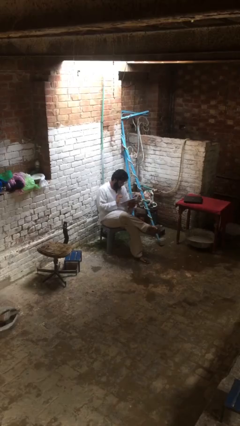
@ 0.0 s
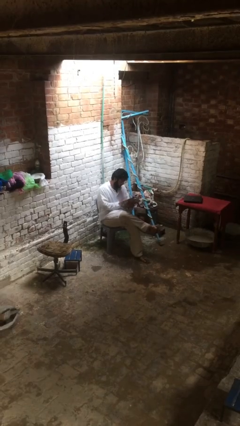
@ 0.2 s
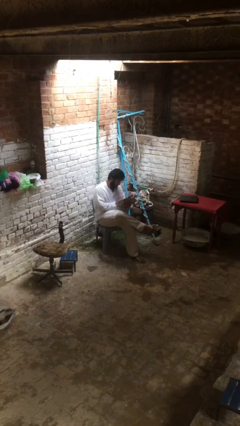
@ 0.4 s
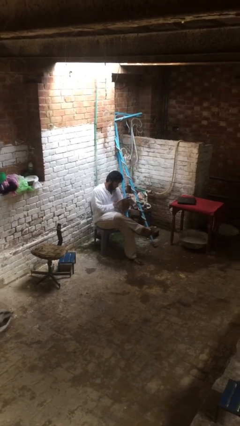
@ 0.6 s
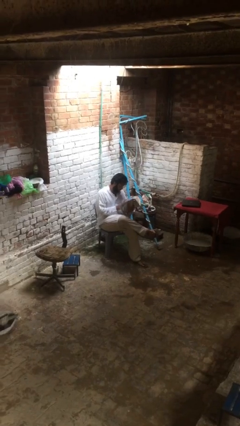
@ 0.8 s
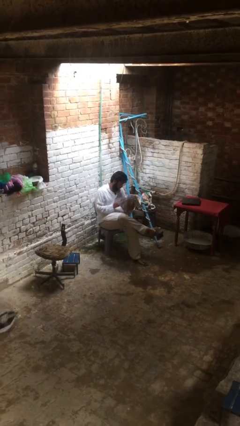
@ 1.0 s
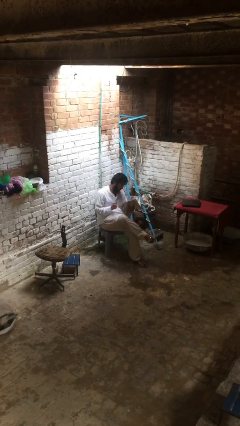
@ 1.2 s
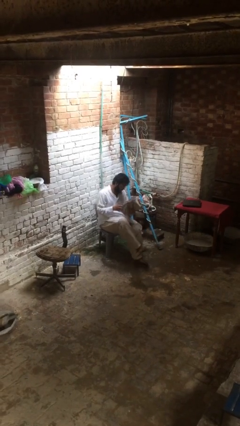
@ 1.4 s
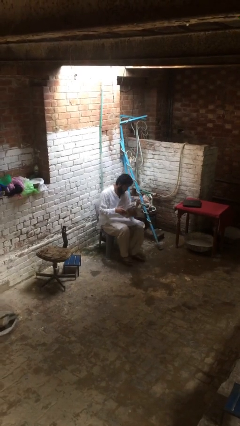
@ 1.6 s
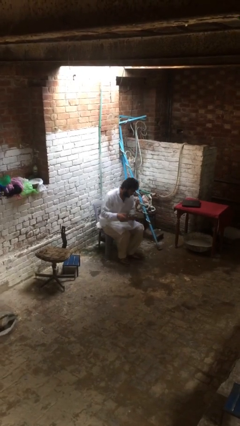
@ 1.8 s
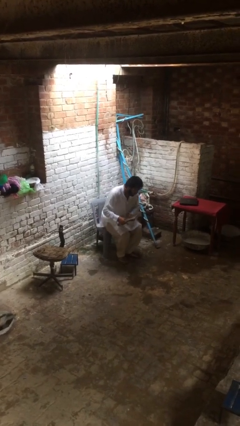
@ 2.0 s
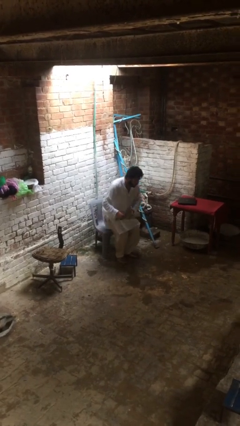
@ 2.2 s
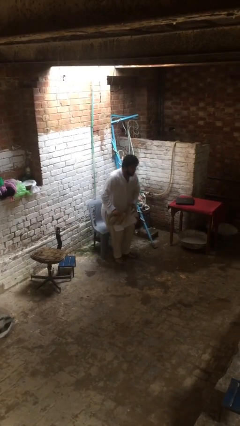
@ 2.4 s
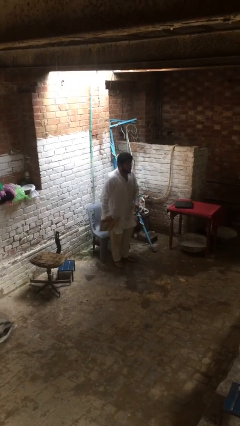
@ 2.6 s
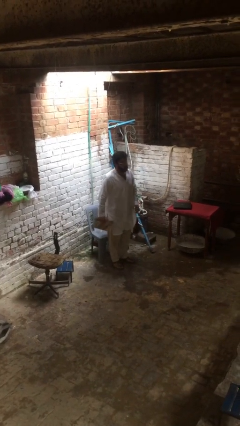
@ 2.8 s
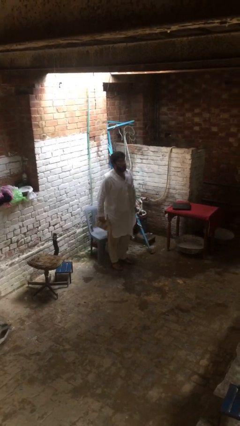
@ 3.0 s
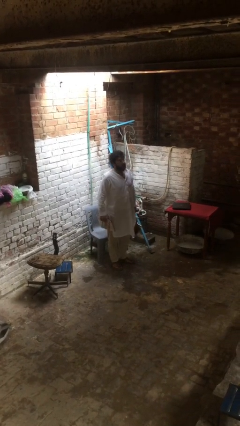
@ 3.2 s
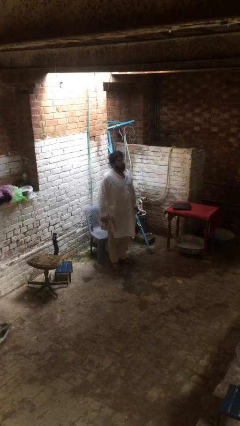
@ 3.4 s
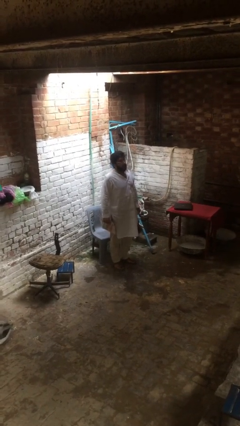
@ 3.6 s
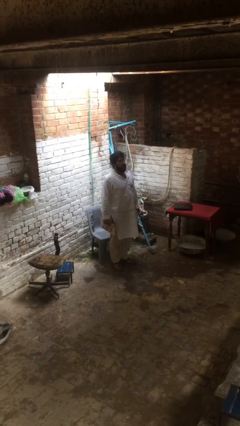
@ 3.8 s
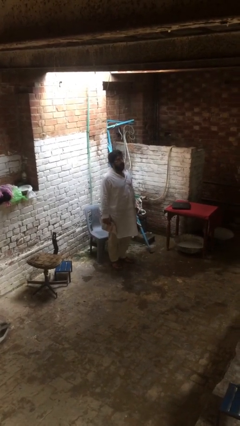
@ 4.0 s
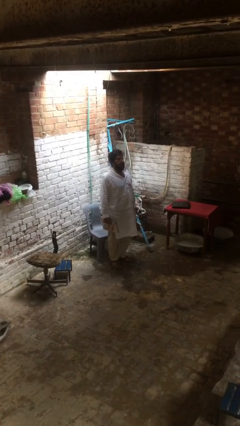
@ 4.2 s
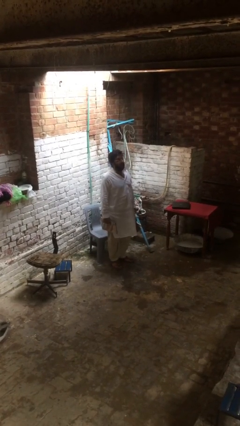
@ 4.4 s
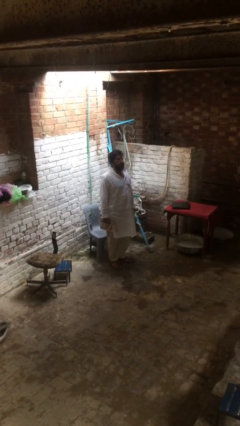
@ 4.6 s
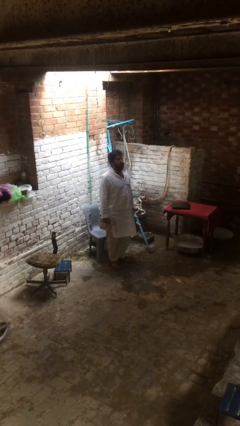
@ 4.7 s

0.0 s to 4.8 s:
person stands up

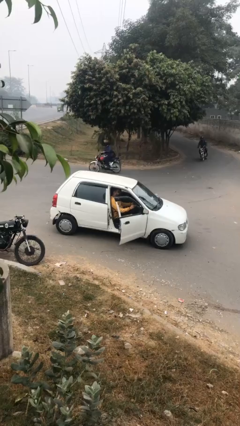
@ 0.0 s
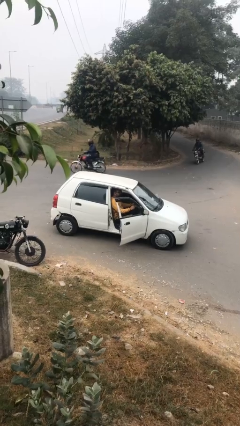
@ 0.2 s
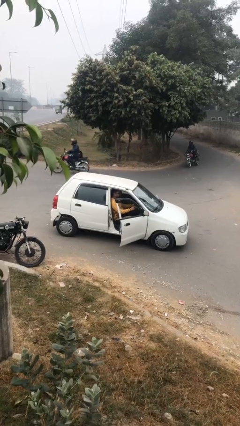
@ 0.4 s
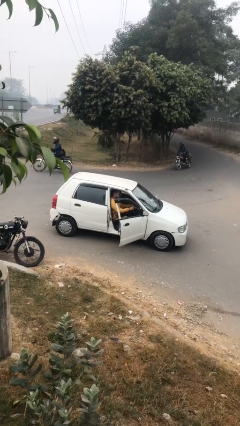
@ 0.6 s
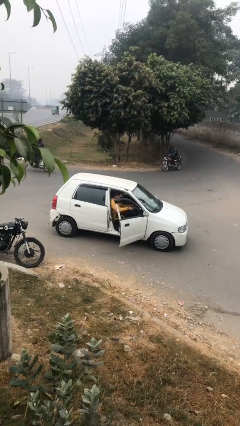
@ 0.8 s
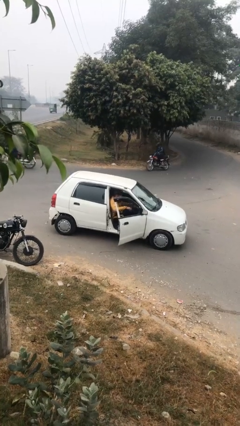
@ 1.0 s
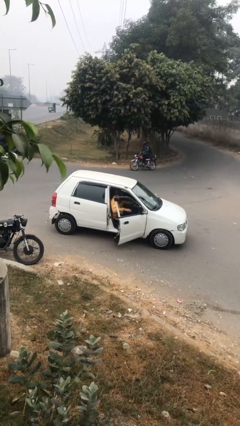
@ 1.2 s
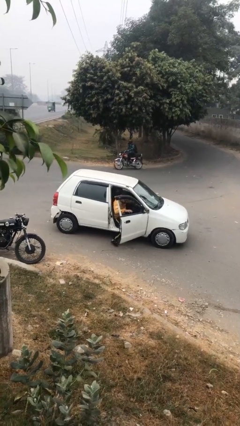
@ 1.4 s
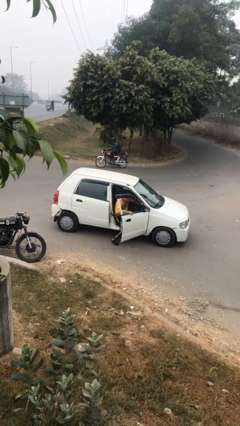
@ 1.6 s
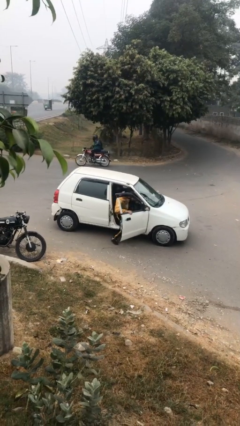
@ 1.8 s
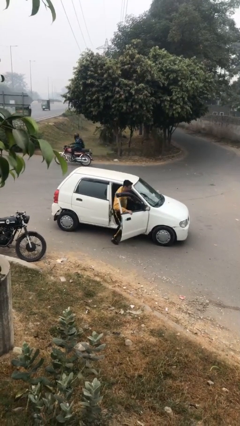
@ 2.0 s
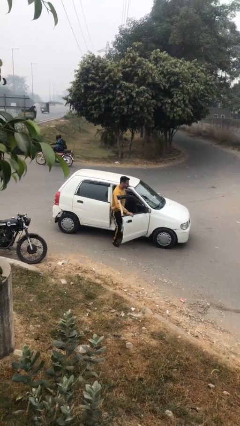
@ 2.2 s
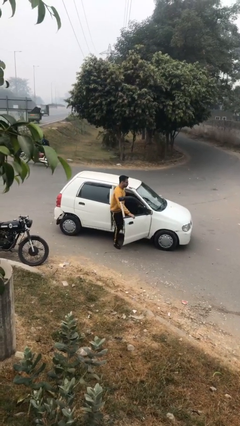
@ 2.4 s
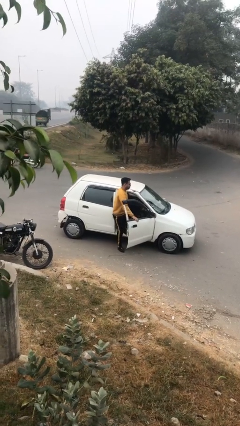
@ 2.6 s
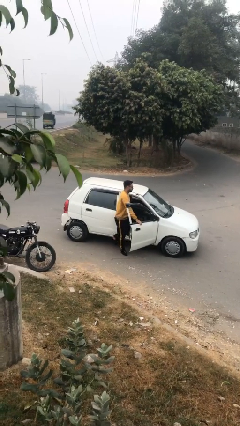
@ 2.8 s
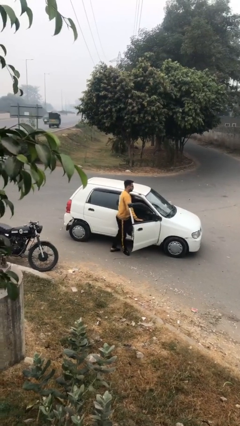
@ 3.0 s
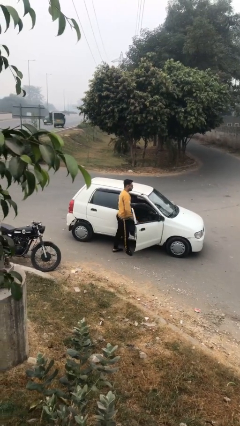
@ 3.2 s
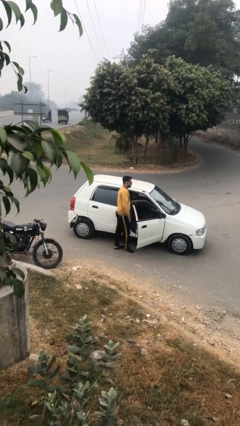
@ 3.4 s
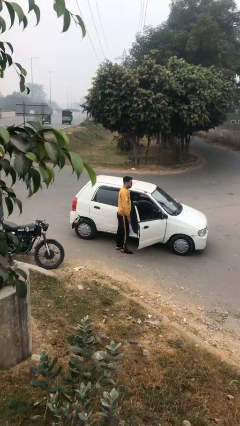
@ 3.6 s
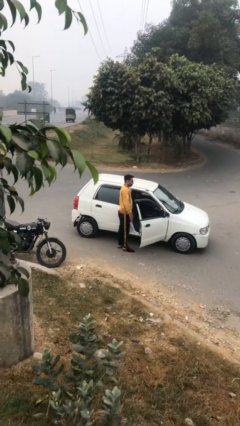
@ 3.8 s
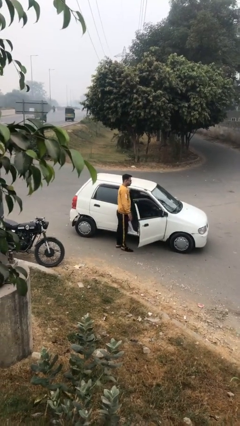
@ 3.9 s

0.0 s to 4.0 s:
person exits car

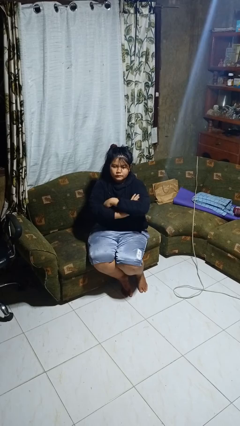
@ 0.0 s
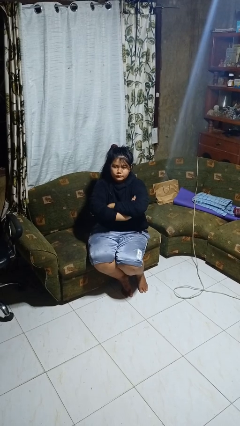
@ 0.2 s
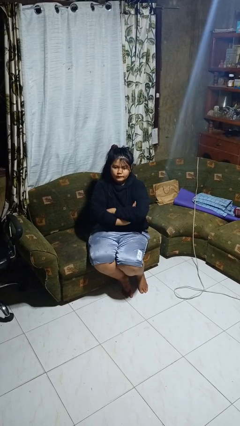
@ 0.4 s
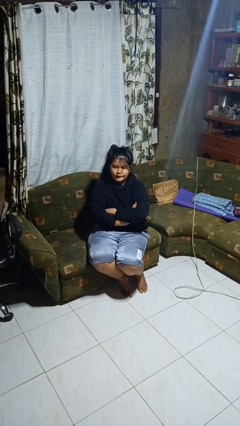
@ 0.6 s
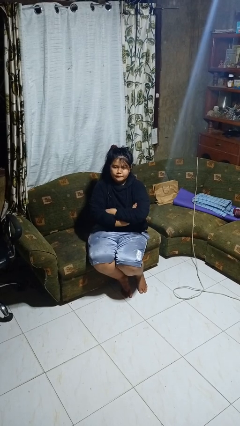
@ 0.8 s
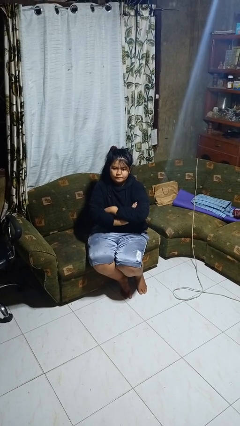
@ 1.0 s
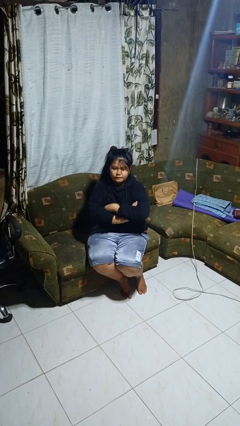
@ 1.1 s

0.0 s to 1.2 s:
person crosses arms

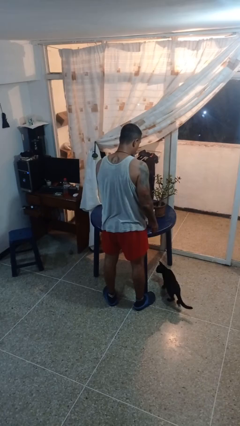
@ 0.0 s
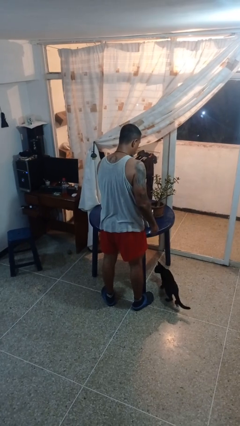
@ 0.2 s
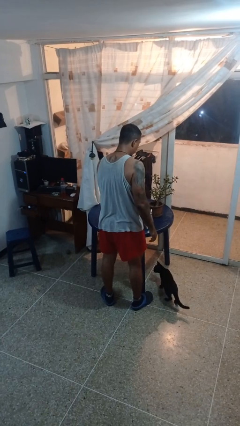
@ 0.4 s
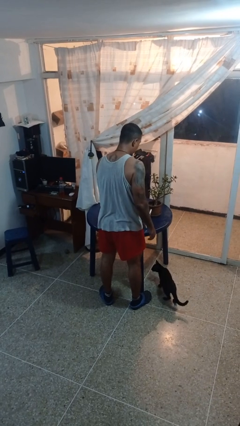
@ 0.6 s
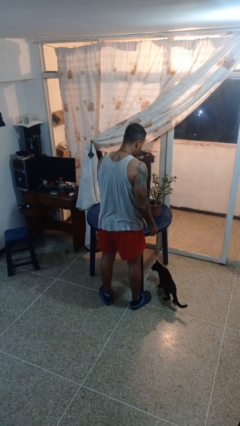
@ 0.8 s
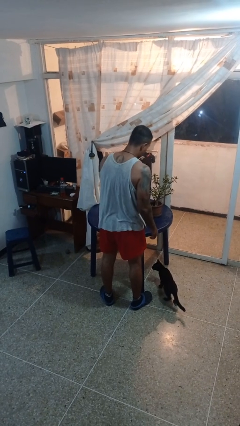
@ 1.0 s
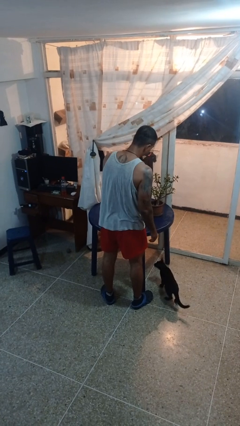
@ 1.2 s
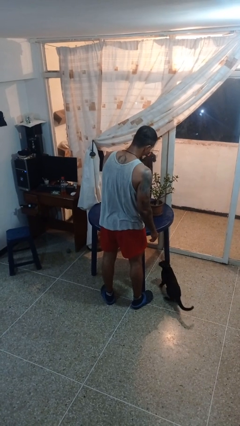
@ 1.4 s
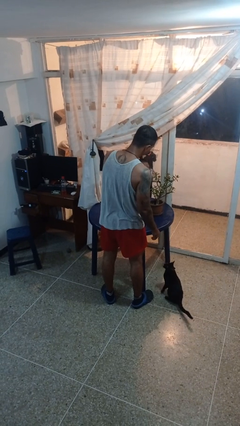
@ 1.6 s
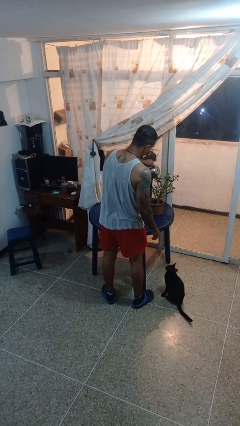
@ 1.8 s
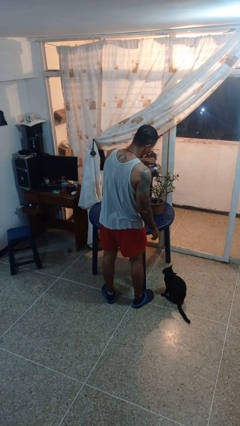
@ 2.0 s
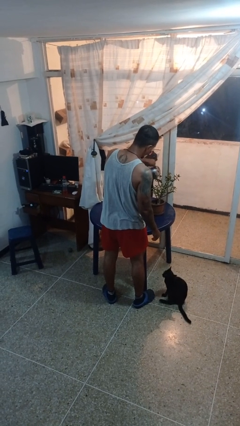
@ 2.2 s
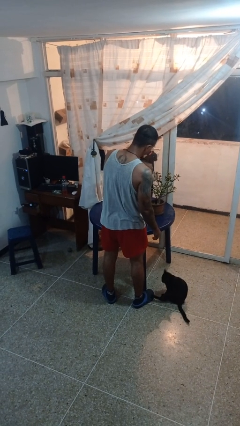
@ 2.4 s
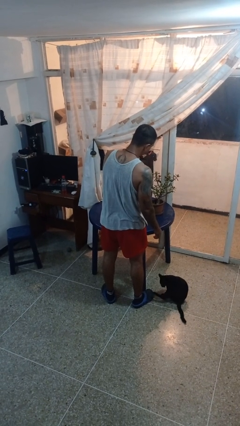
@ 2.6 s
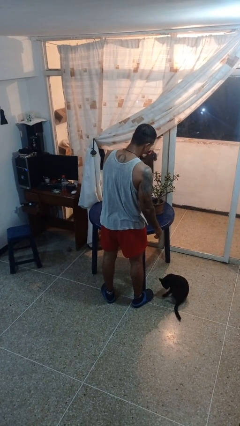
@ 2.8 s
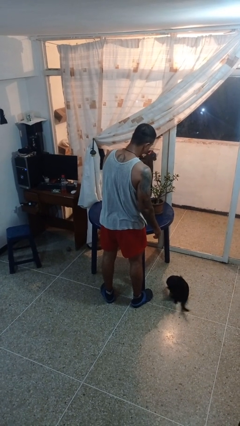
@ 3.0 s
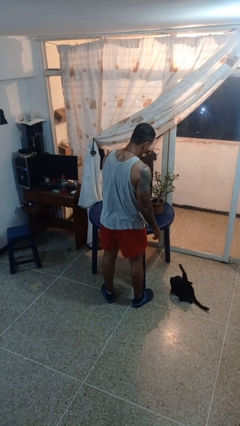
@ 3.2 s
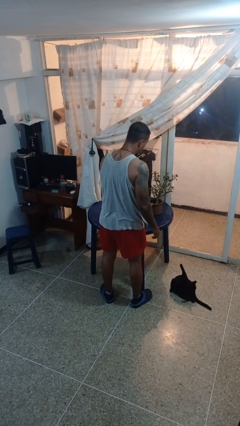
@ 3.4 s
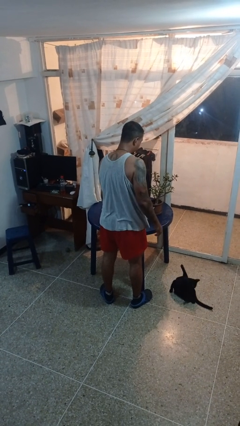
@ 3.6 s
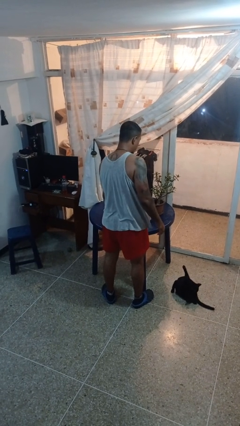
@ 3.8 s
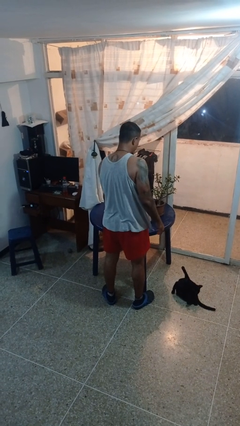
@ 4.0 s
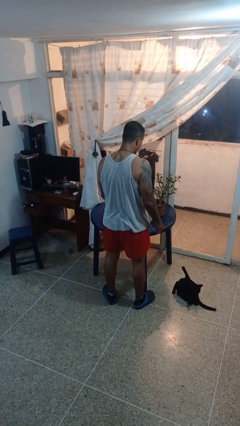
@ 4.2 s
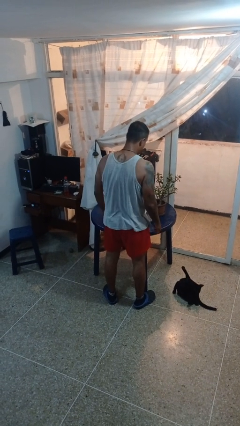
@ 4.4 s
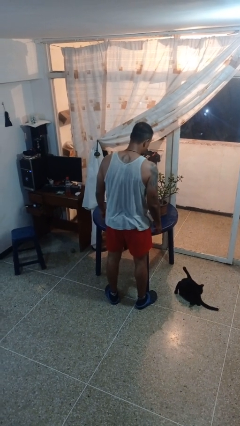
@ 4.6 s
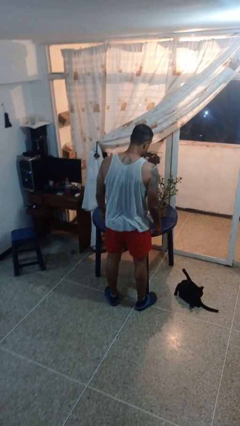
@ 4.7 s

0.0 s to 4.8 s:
person waters houseplant

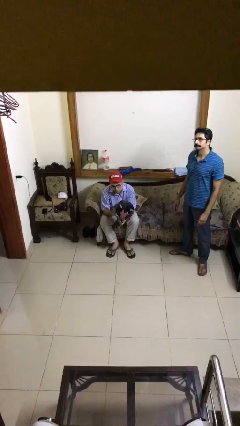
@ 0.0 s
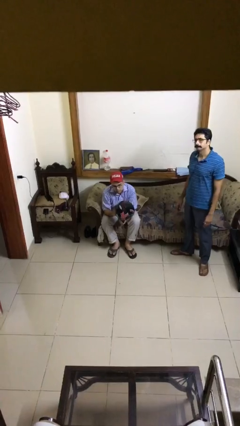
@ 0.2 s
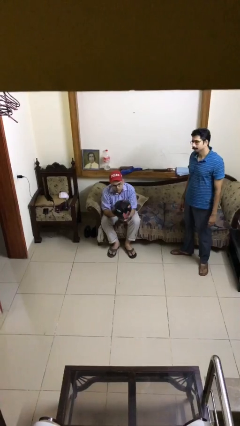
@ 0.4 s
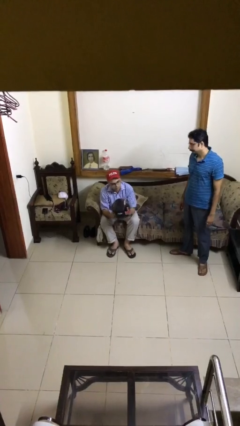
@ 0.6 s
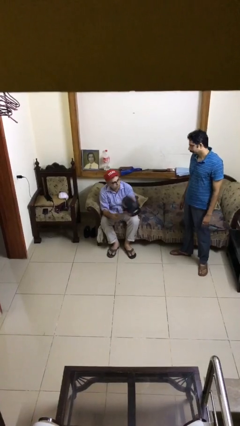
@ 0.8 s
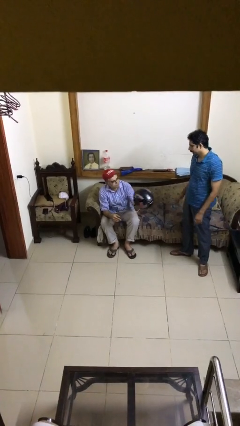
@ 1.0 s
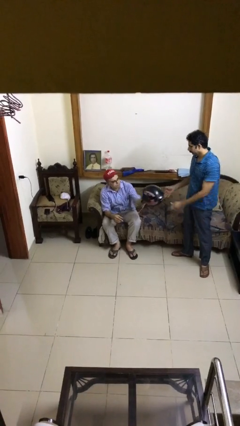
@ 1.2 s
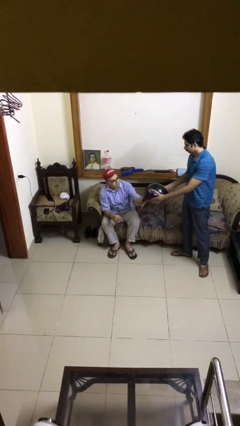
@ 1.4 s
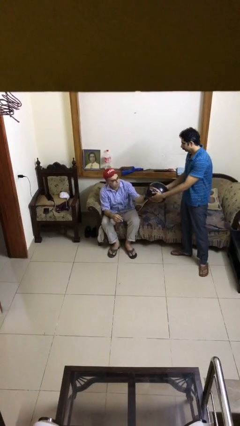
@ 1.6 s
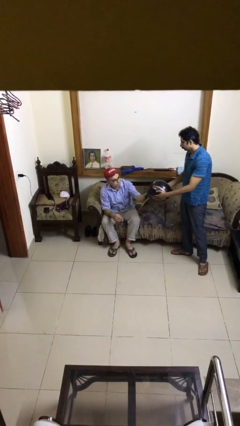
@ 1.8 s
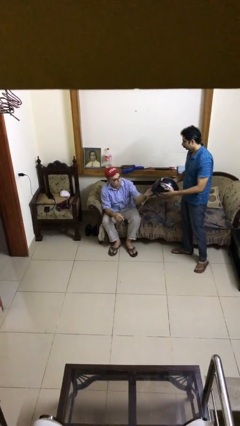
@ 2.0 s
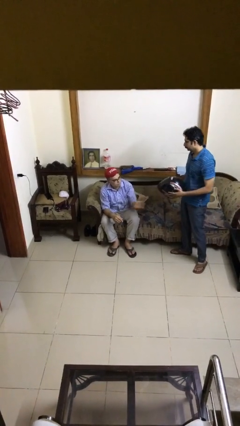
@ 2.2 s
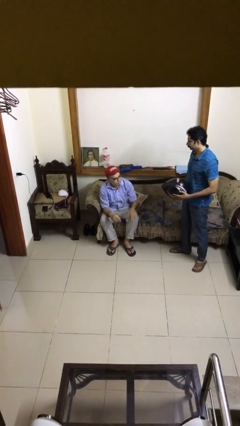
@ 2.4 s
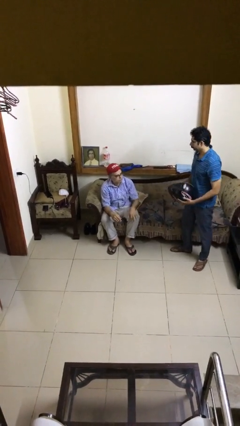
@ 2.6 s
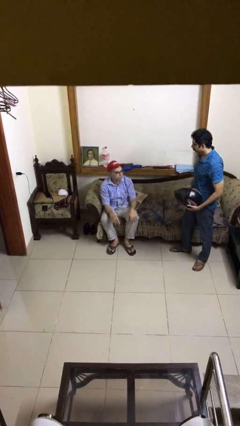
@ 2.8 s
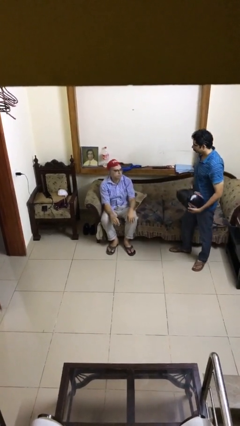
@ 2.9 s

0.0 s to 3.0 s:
person transfers object to person

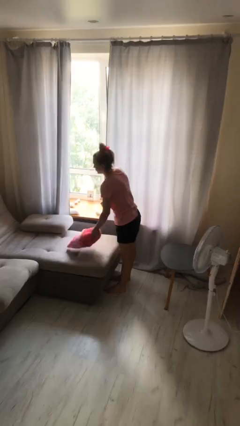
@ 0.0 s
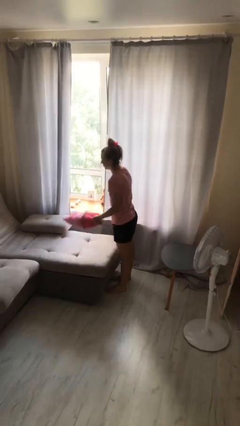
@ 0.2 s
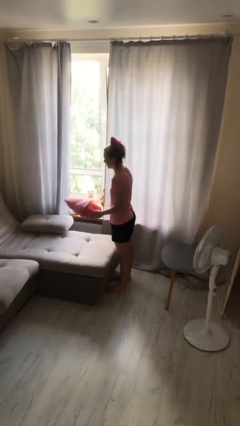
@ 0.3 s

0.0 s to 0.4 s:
person picks up object from couch
